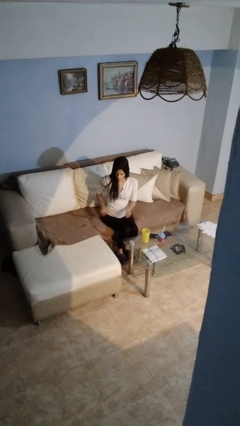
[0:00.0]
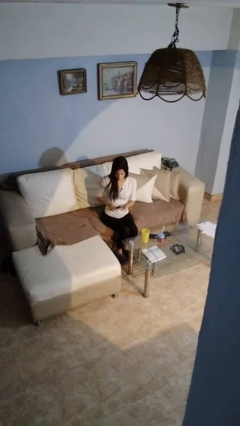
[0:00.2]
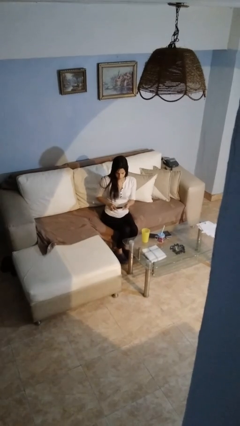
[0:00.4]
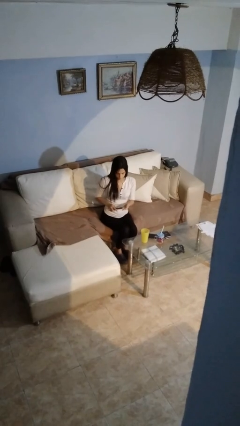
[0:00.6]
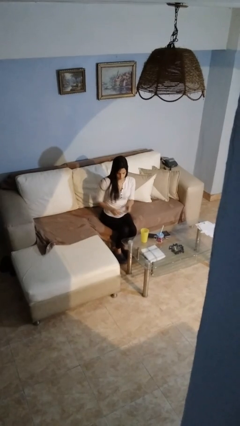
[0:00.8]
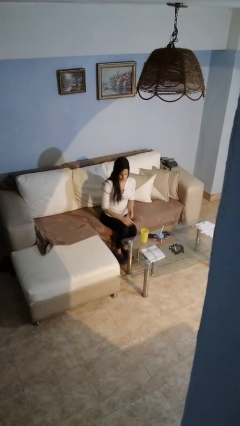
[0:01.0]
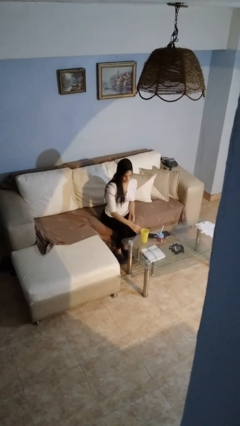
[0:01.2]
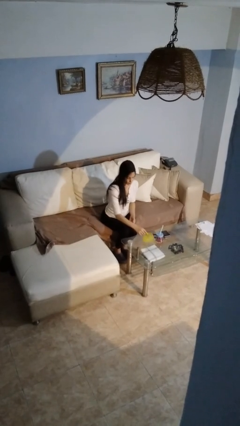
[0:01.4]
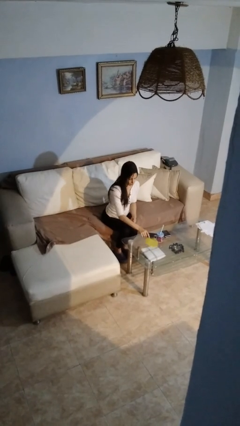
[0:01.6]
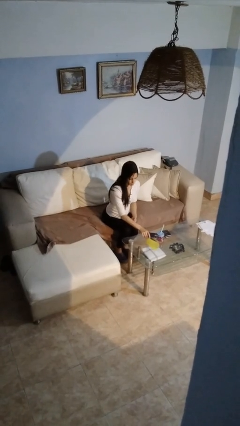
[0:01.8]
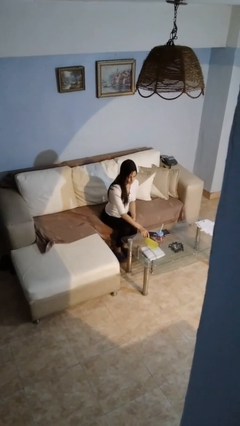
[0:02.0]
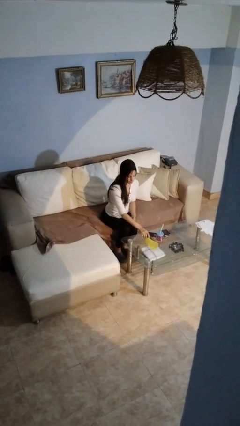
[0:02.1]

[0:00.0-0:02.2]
person knocks over glass

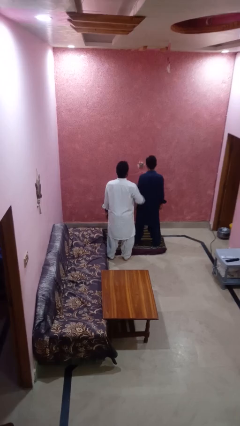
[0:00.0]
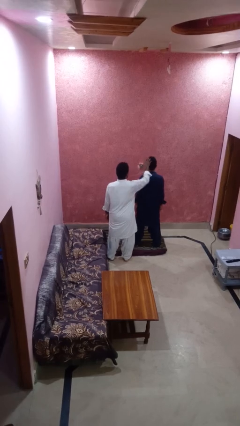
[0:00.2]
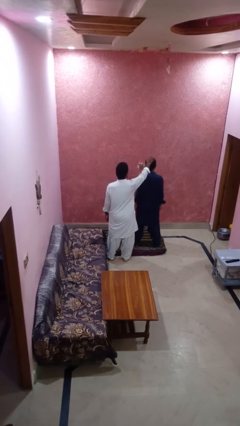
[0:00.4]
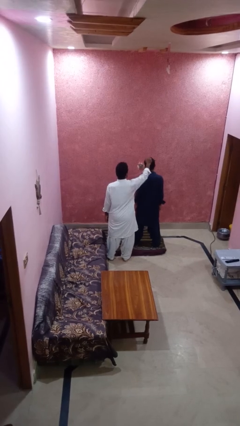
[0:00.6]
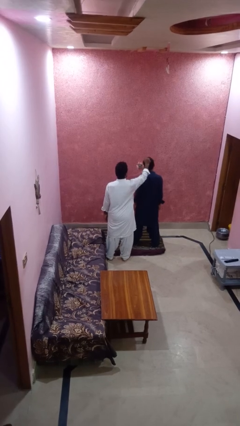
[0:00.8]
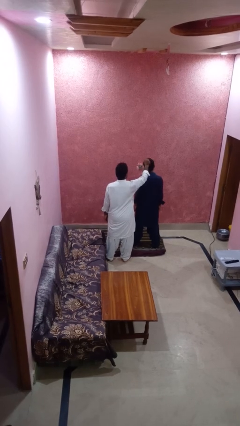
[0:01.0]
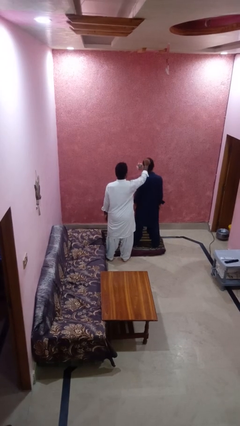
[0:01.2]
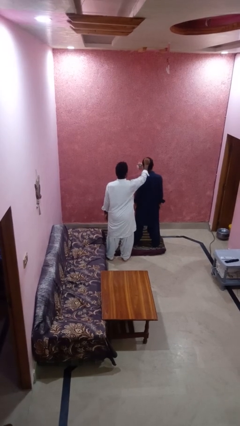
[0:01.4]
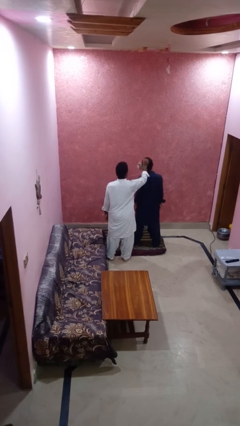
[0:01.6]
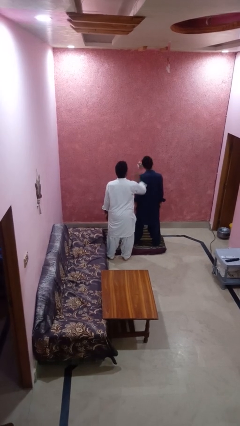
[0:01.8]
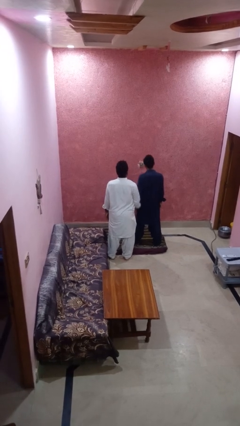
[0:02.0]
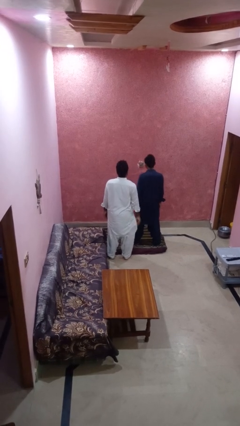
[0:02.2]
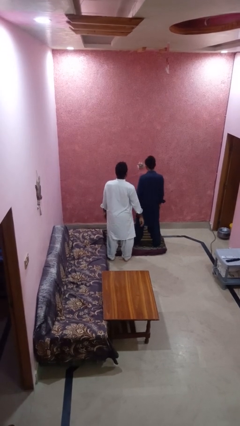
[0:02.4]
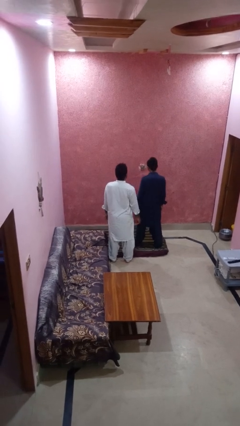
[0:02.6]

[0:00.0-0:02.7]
person grabs person by hair

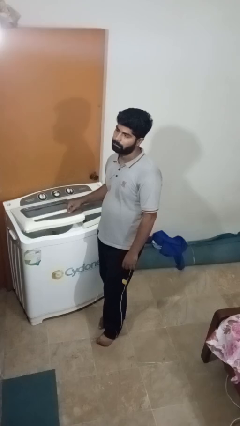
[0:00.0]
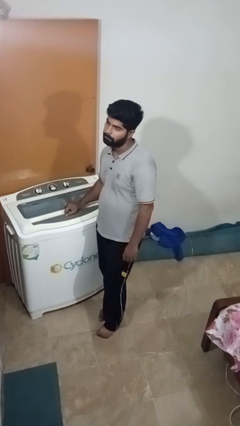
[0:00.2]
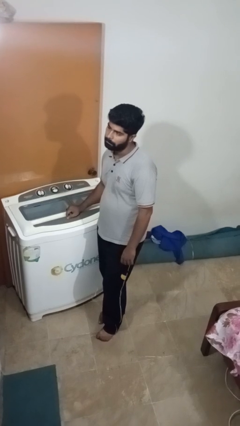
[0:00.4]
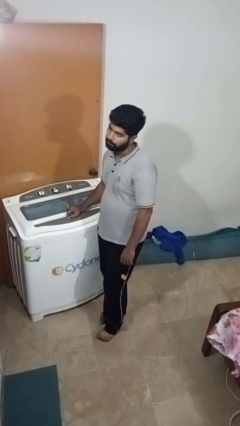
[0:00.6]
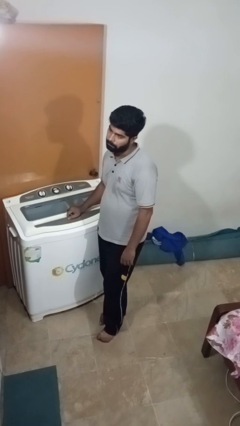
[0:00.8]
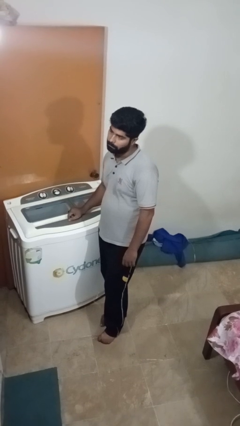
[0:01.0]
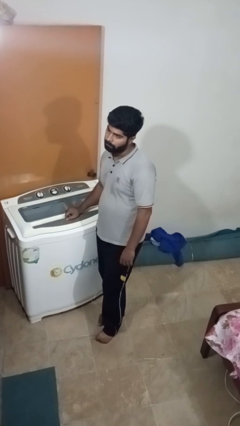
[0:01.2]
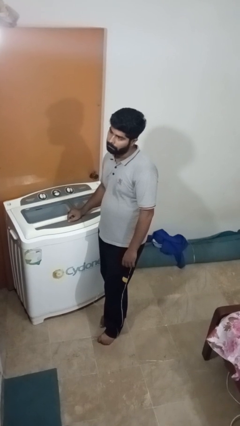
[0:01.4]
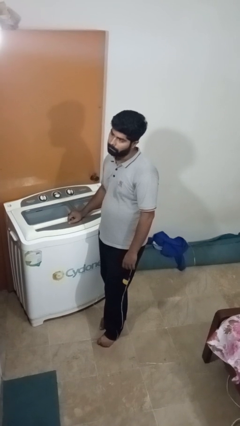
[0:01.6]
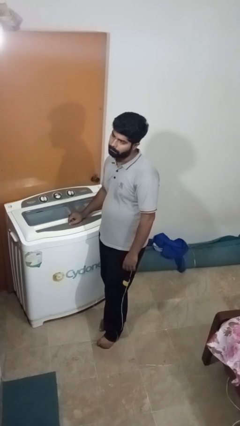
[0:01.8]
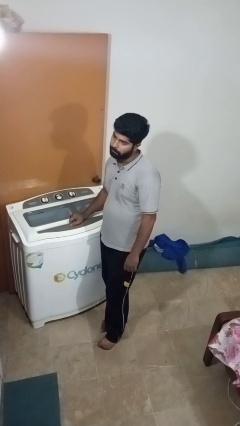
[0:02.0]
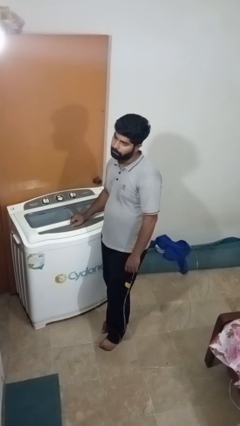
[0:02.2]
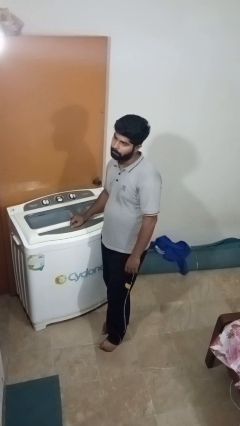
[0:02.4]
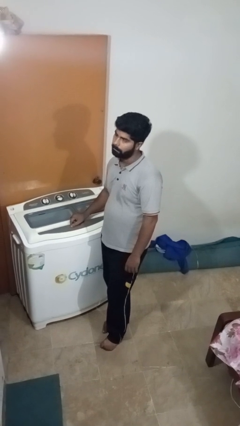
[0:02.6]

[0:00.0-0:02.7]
person closes clothes washer

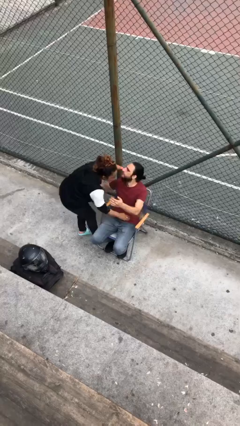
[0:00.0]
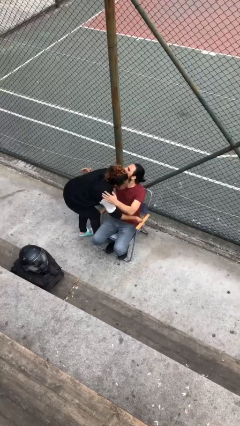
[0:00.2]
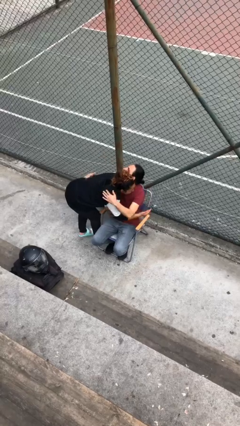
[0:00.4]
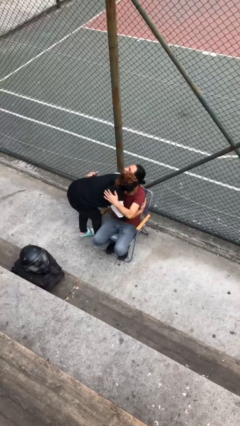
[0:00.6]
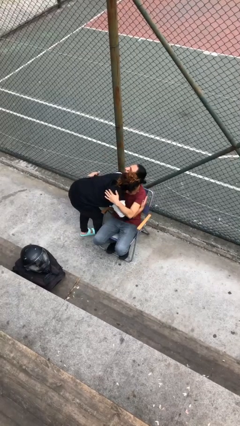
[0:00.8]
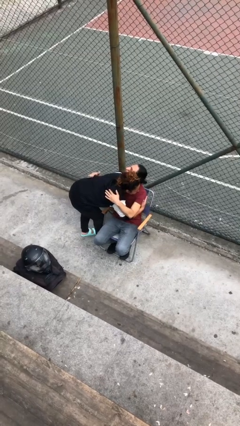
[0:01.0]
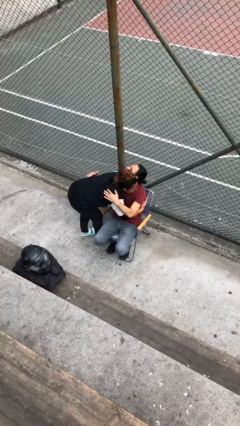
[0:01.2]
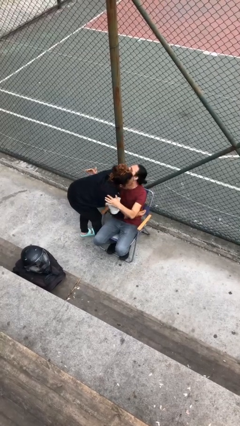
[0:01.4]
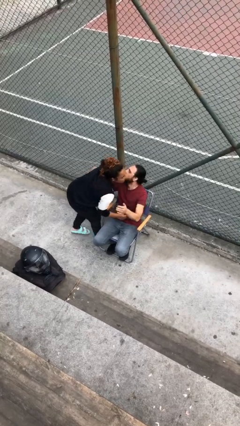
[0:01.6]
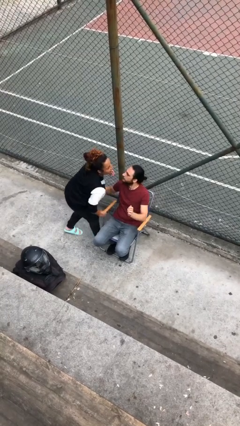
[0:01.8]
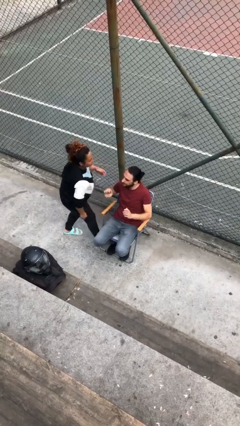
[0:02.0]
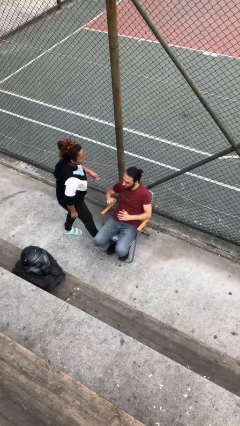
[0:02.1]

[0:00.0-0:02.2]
person embraces person

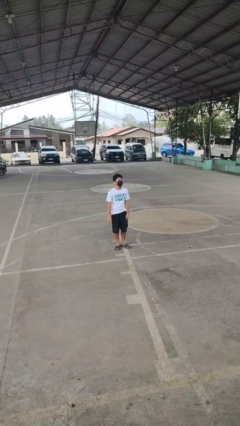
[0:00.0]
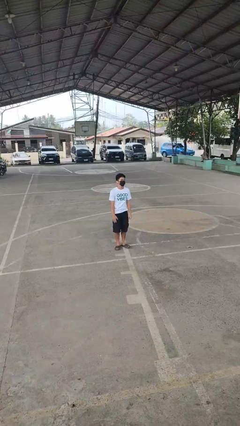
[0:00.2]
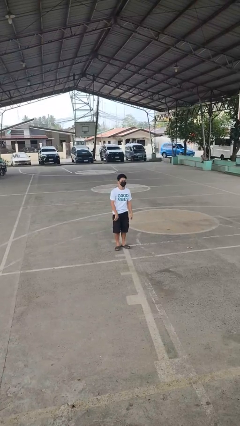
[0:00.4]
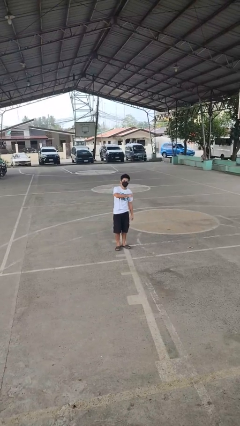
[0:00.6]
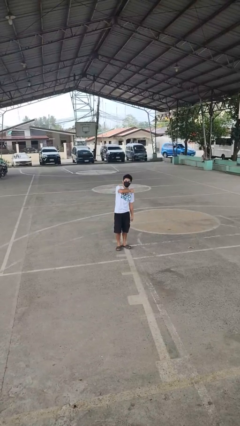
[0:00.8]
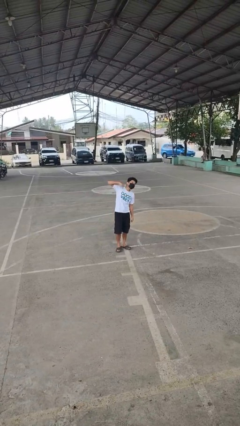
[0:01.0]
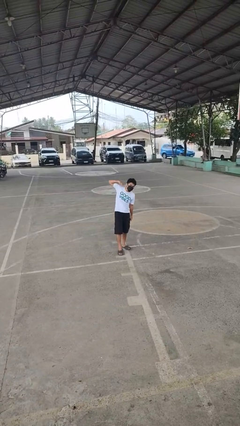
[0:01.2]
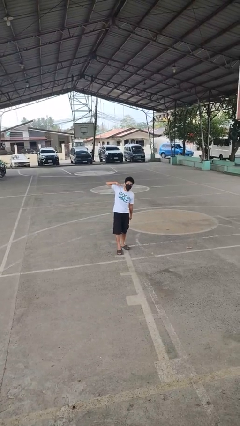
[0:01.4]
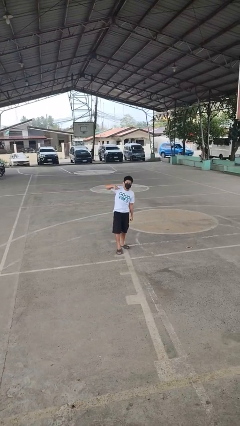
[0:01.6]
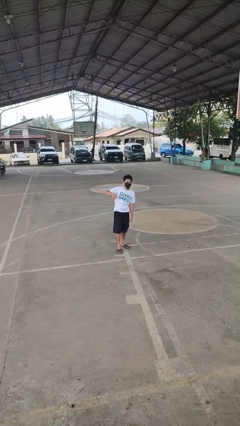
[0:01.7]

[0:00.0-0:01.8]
person gestures cut

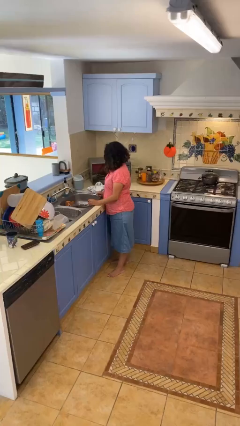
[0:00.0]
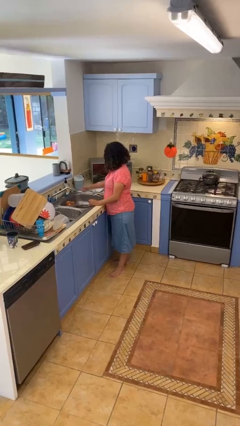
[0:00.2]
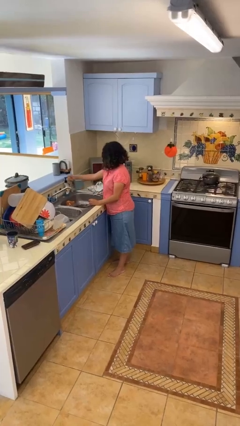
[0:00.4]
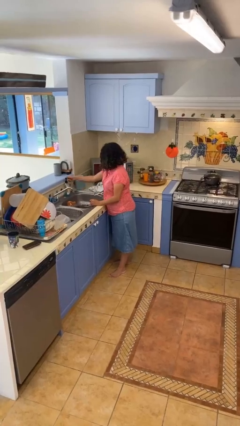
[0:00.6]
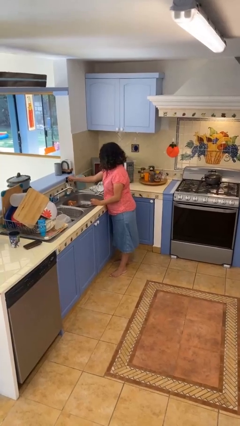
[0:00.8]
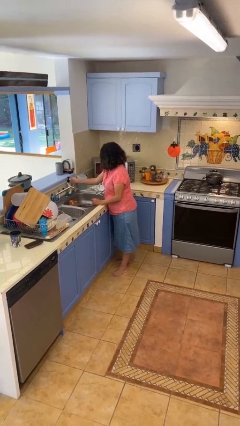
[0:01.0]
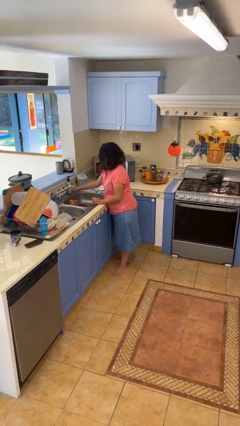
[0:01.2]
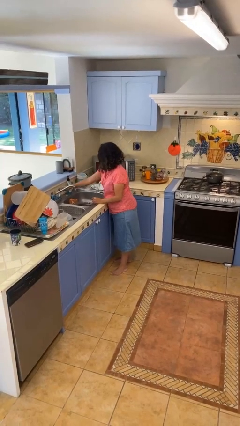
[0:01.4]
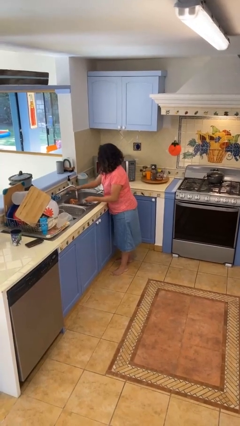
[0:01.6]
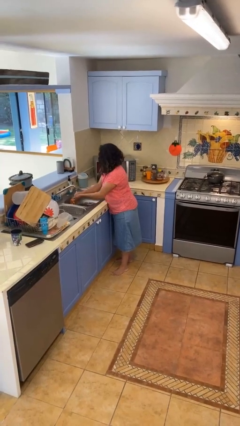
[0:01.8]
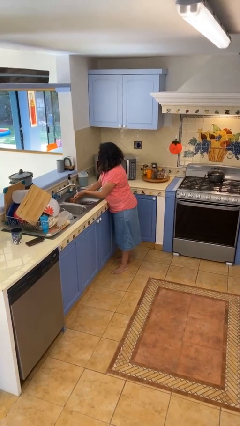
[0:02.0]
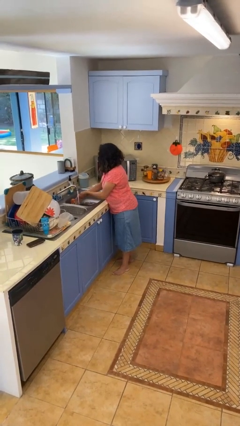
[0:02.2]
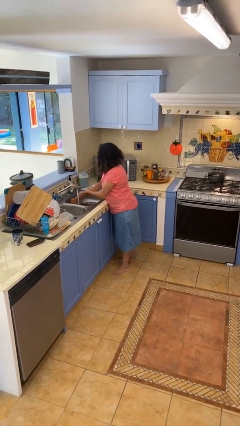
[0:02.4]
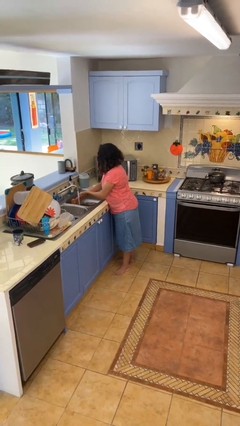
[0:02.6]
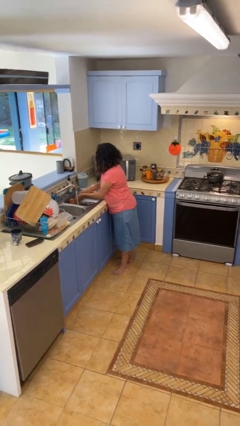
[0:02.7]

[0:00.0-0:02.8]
person washes hands

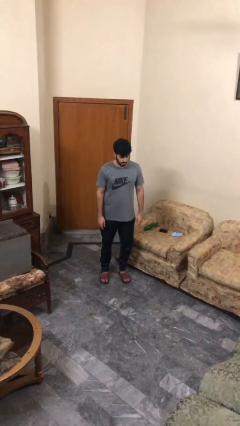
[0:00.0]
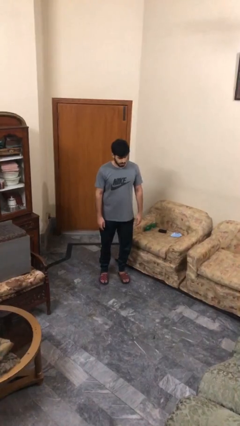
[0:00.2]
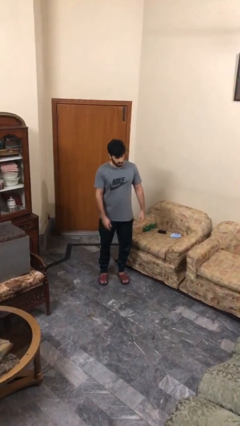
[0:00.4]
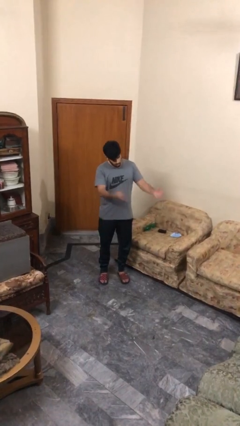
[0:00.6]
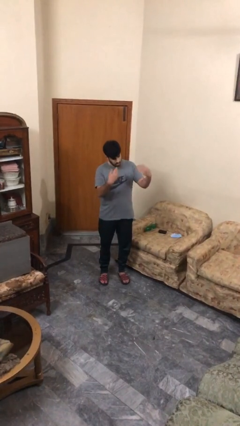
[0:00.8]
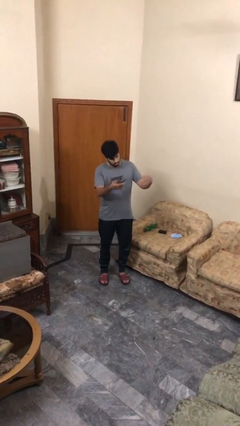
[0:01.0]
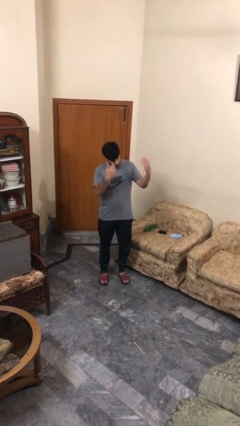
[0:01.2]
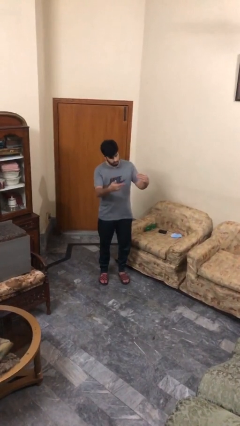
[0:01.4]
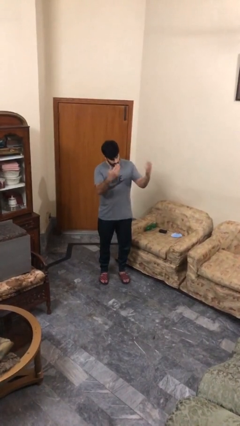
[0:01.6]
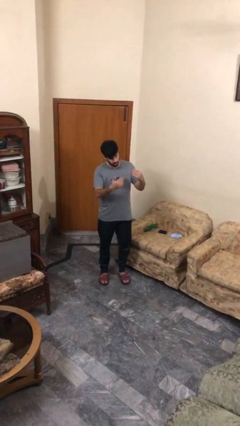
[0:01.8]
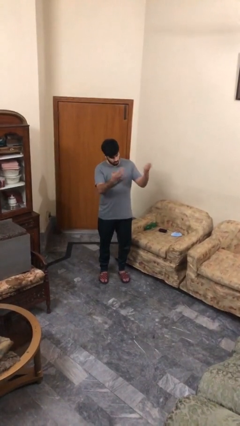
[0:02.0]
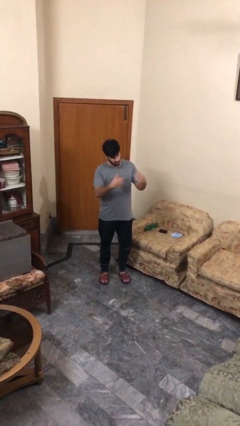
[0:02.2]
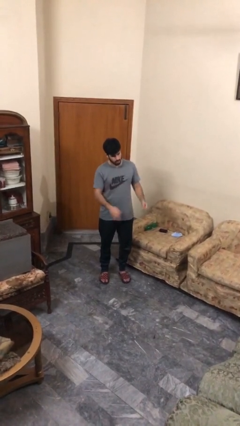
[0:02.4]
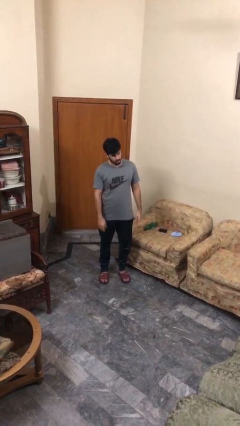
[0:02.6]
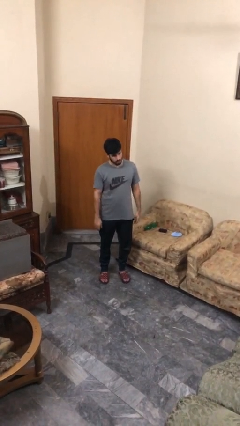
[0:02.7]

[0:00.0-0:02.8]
person gestures come here
